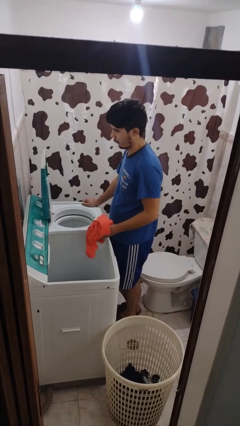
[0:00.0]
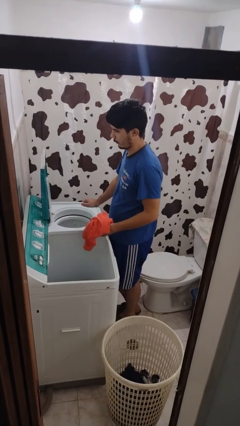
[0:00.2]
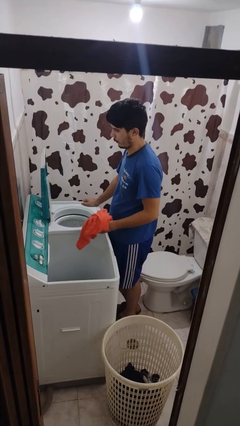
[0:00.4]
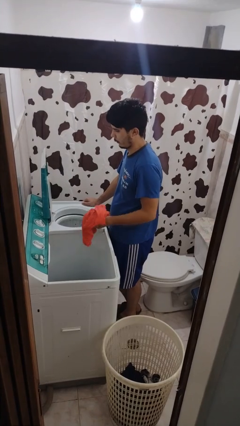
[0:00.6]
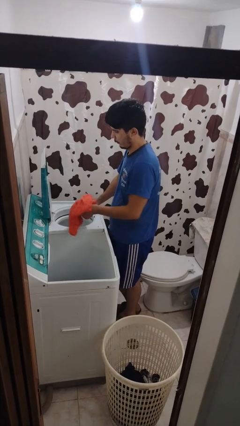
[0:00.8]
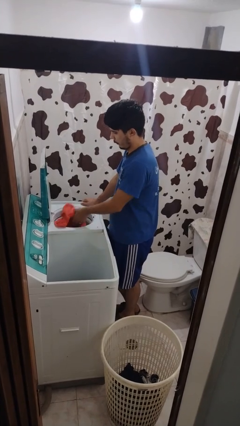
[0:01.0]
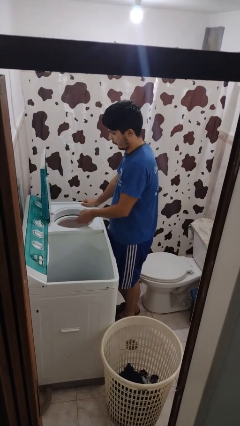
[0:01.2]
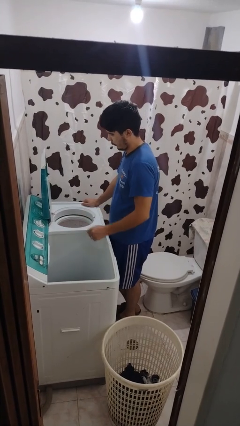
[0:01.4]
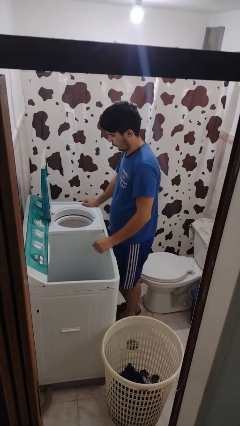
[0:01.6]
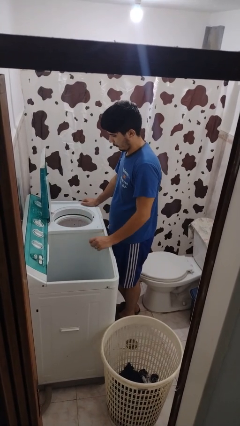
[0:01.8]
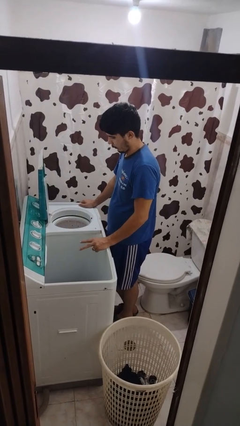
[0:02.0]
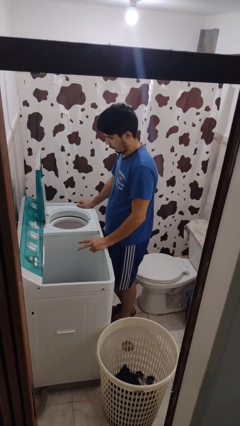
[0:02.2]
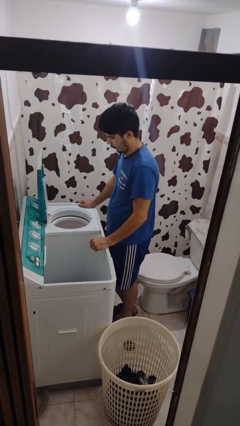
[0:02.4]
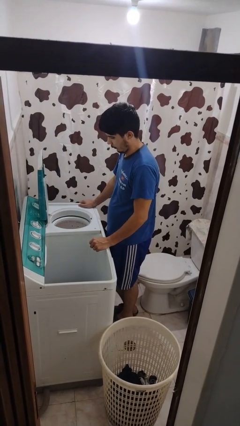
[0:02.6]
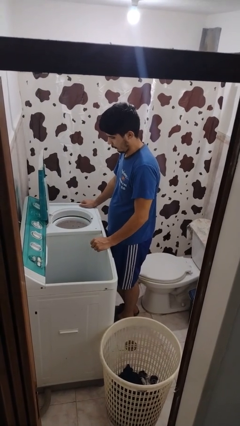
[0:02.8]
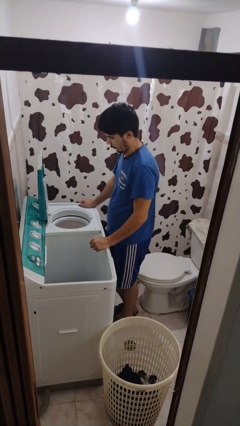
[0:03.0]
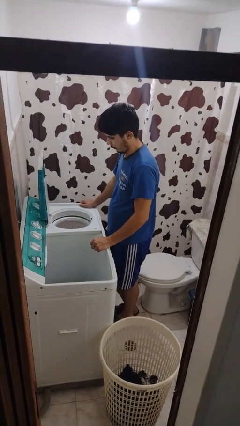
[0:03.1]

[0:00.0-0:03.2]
person loads dryer

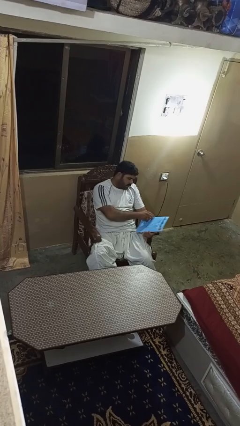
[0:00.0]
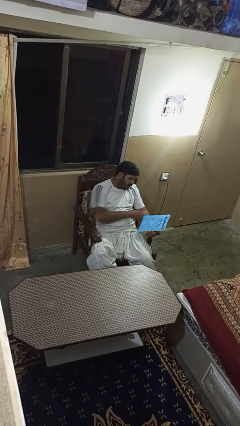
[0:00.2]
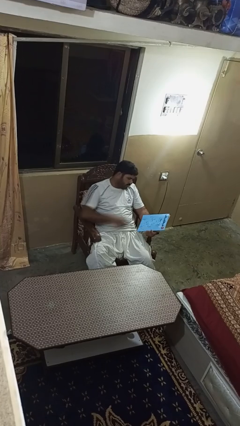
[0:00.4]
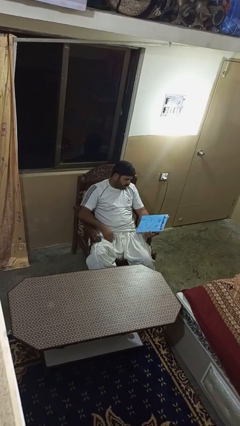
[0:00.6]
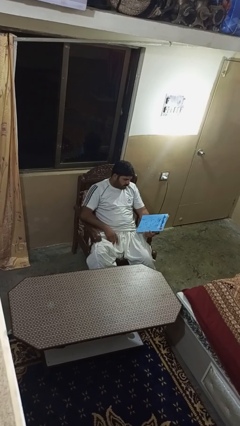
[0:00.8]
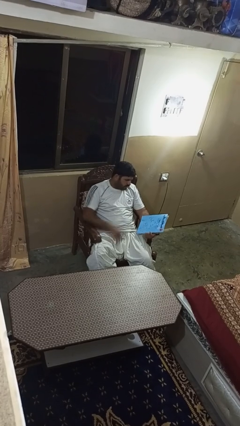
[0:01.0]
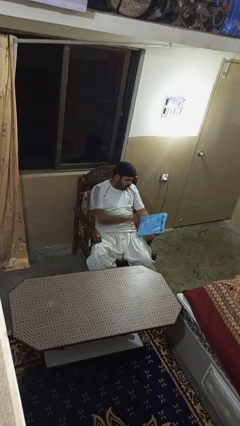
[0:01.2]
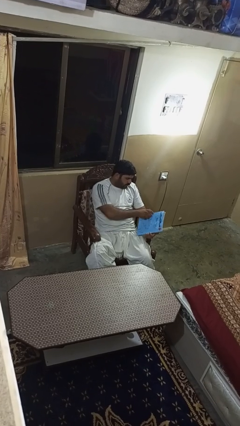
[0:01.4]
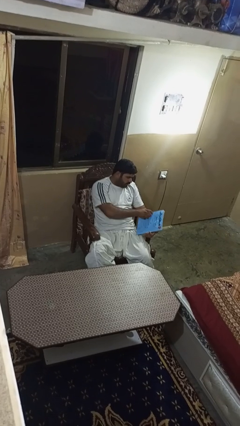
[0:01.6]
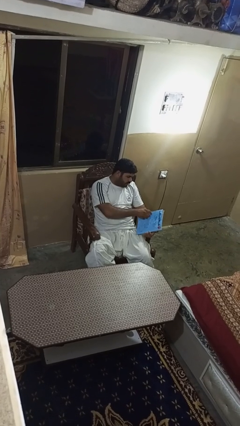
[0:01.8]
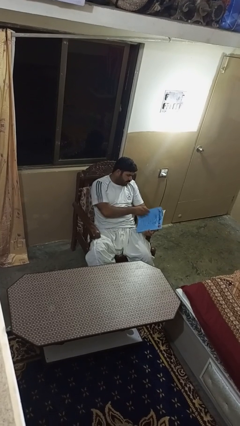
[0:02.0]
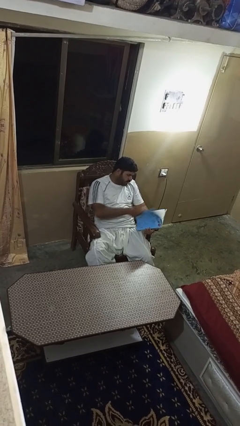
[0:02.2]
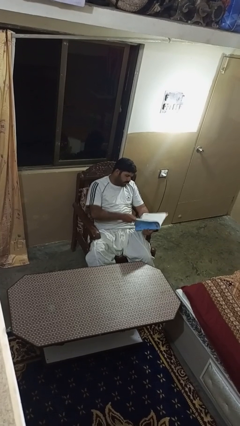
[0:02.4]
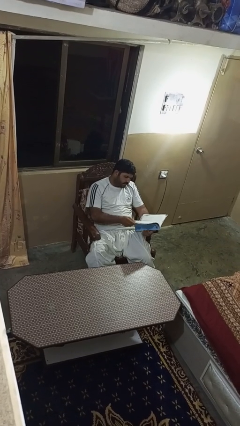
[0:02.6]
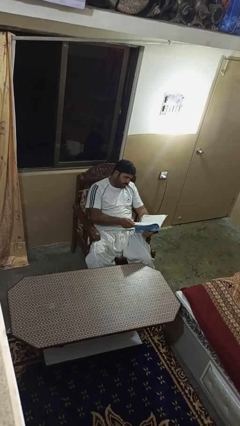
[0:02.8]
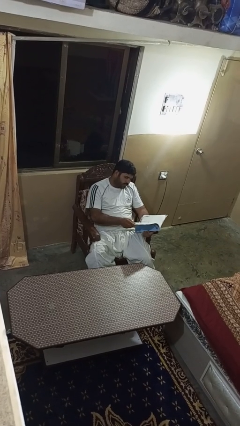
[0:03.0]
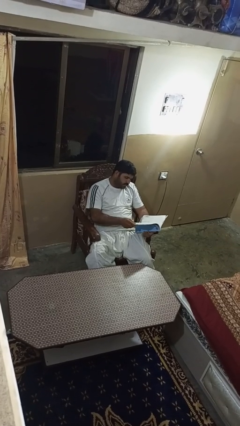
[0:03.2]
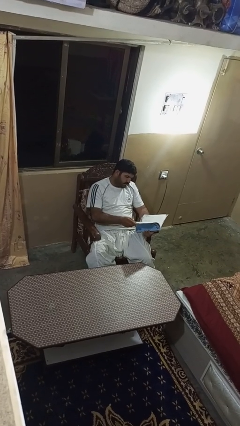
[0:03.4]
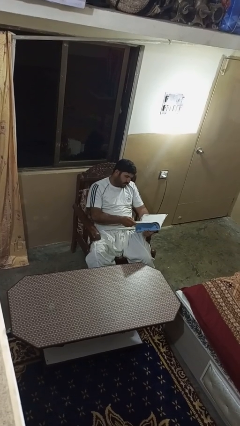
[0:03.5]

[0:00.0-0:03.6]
person reads magazine

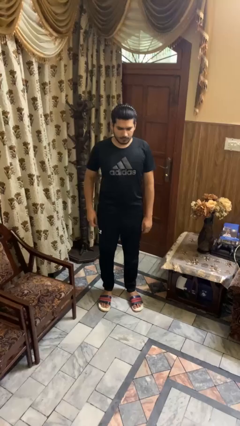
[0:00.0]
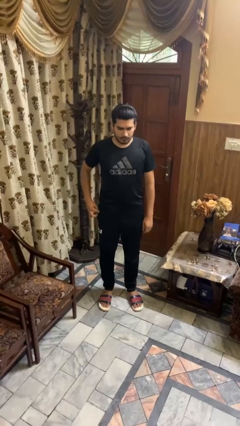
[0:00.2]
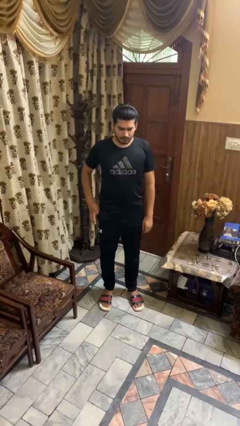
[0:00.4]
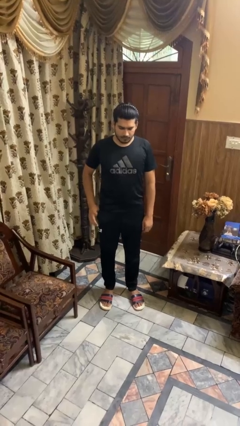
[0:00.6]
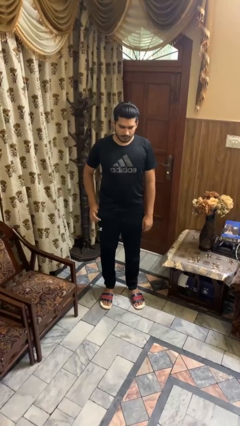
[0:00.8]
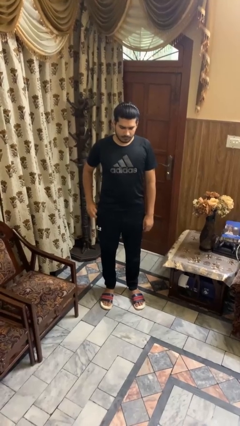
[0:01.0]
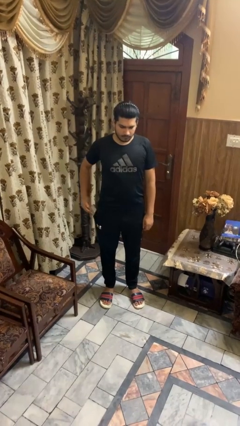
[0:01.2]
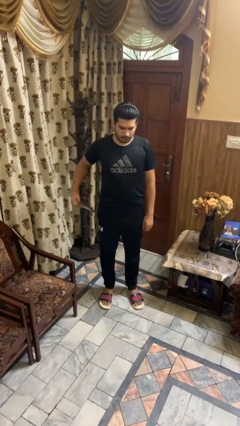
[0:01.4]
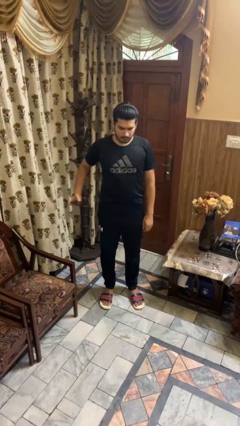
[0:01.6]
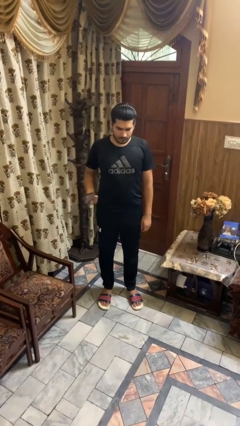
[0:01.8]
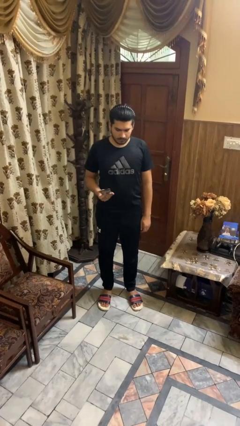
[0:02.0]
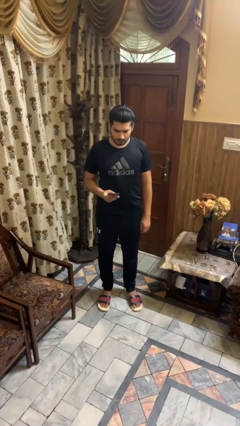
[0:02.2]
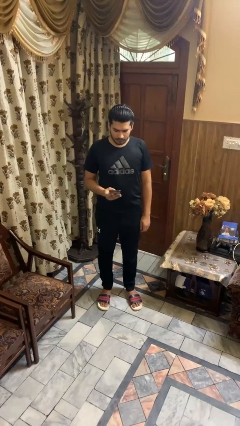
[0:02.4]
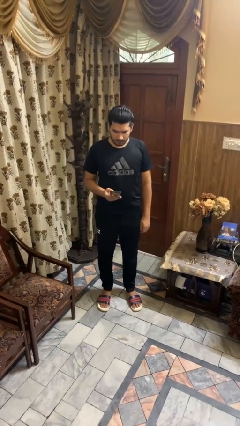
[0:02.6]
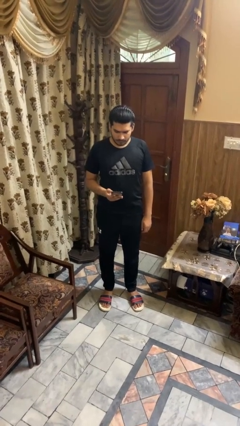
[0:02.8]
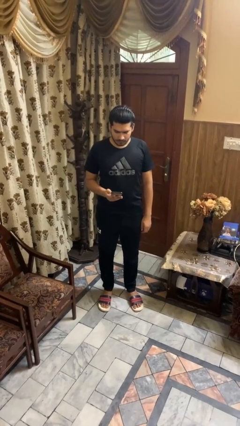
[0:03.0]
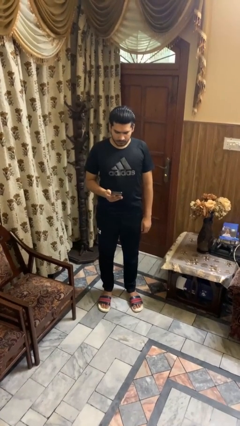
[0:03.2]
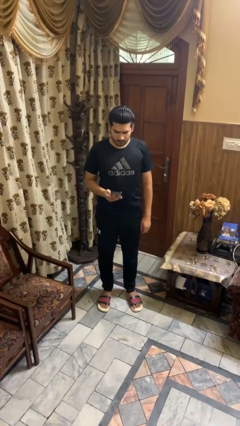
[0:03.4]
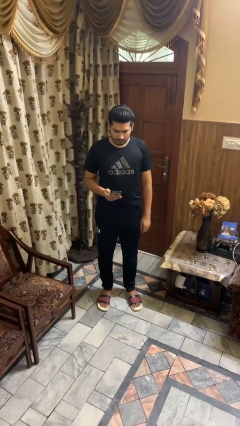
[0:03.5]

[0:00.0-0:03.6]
person takes phone from pocket

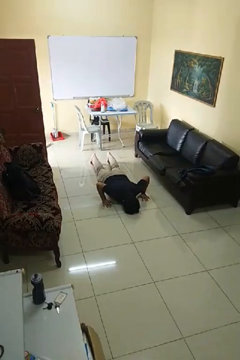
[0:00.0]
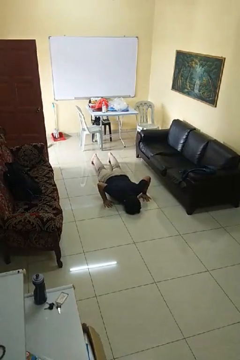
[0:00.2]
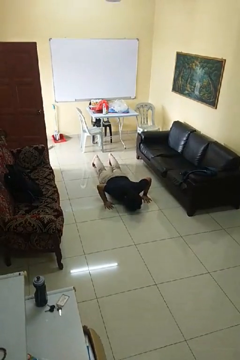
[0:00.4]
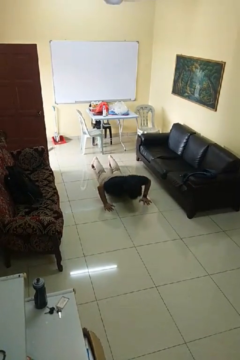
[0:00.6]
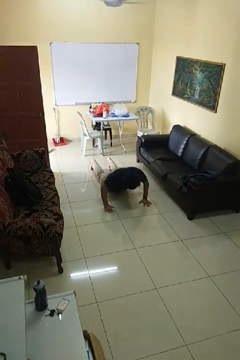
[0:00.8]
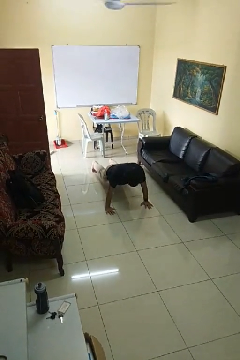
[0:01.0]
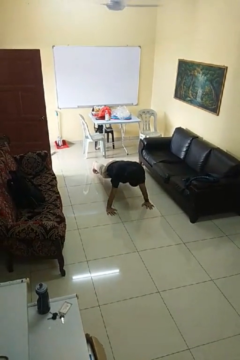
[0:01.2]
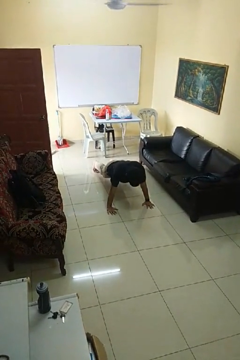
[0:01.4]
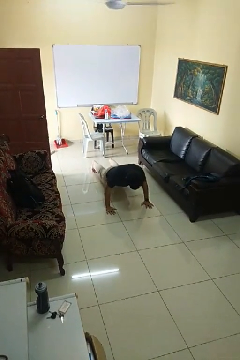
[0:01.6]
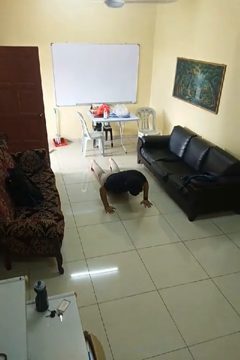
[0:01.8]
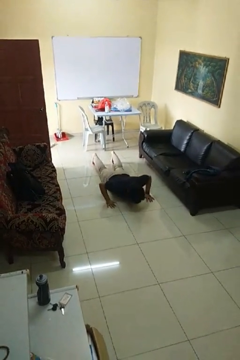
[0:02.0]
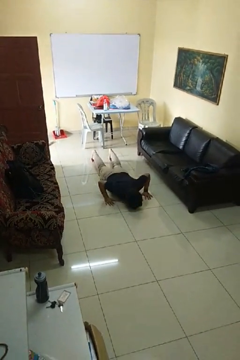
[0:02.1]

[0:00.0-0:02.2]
person exercises with pushup

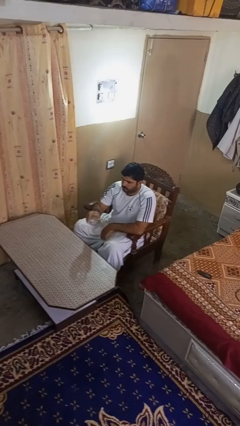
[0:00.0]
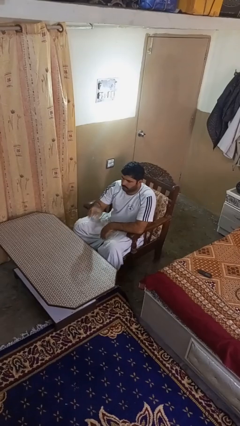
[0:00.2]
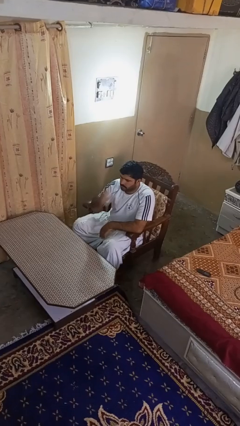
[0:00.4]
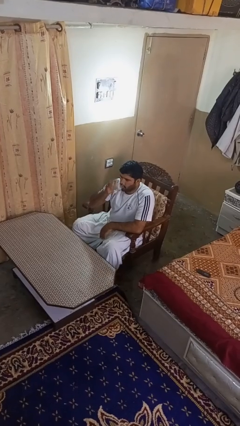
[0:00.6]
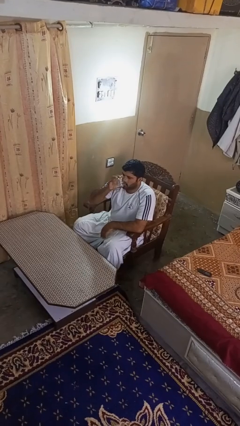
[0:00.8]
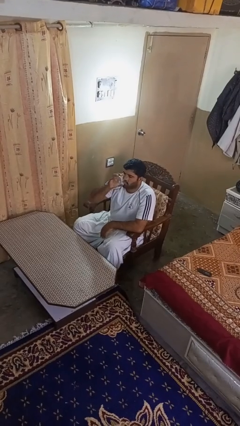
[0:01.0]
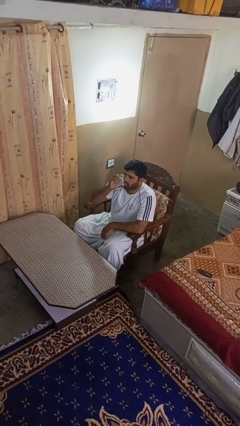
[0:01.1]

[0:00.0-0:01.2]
person drinks from shotglass

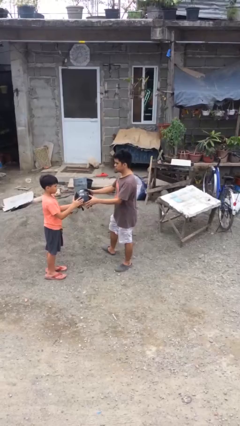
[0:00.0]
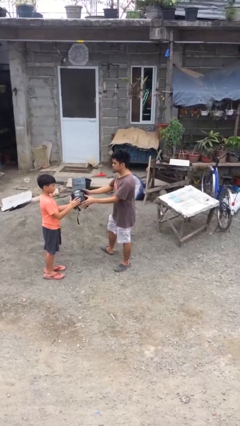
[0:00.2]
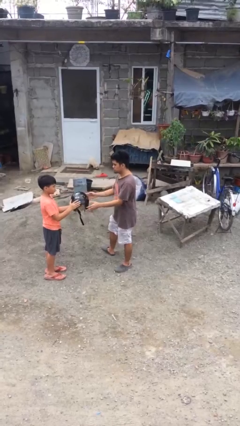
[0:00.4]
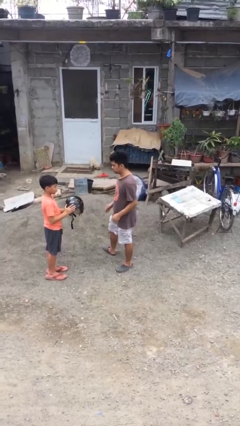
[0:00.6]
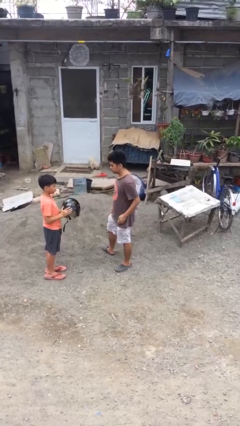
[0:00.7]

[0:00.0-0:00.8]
person transfers object to person

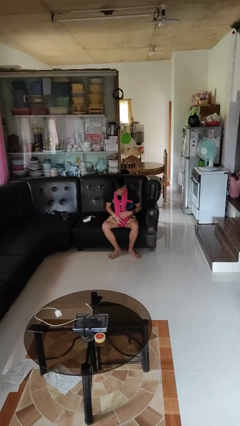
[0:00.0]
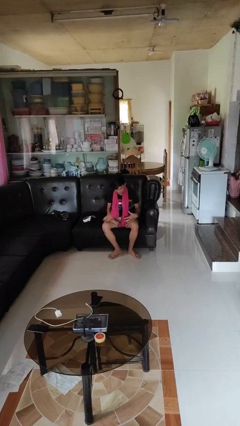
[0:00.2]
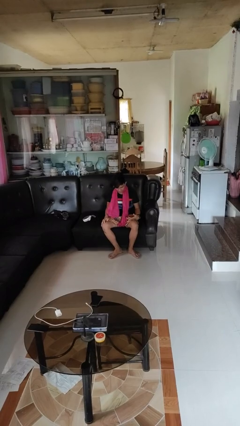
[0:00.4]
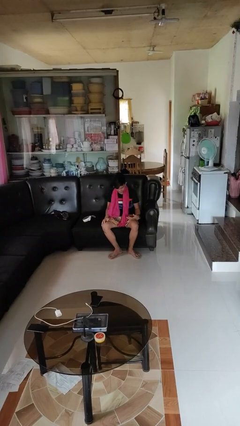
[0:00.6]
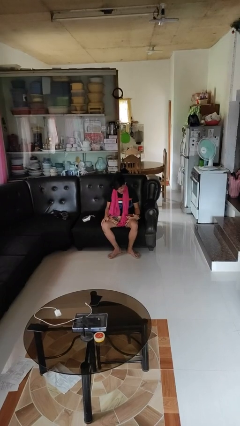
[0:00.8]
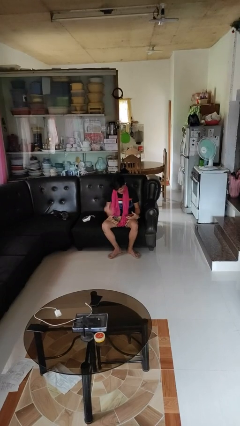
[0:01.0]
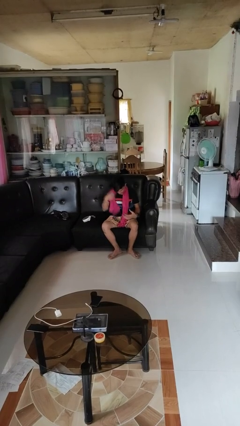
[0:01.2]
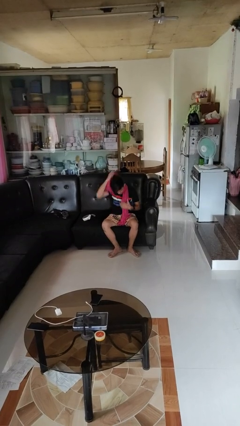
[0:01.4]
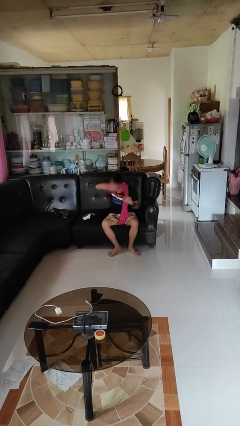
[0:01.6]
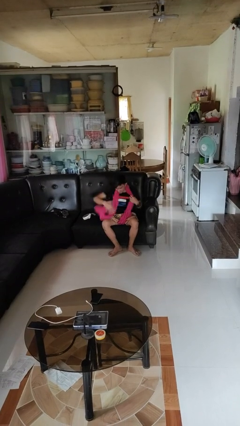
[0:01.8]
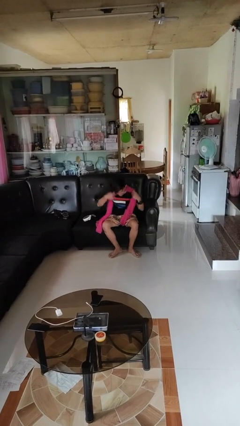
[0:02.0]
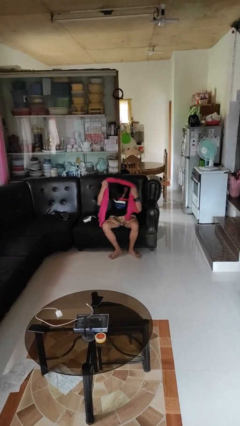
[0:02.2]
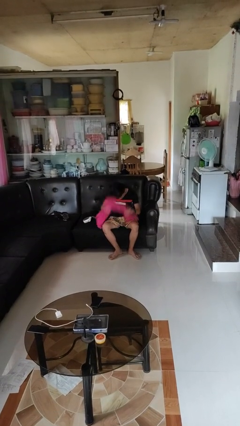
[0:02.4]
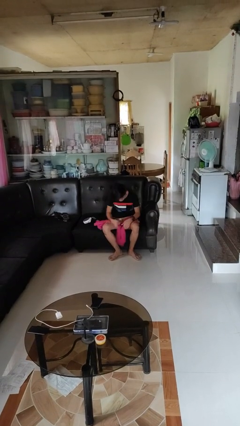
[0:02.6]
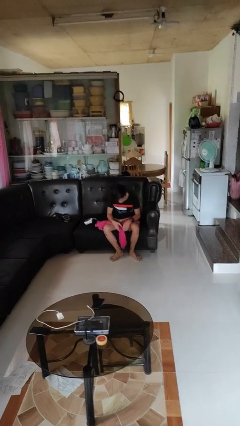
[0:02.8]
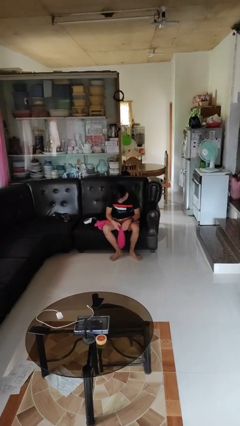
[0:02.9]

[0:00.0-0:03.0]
person takes off scarf
